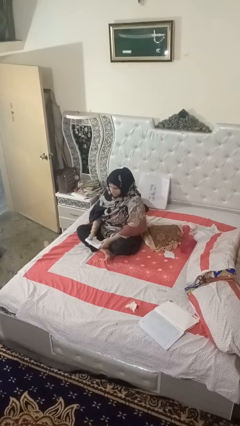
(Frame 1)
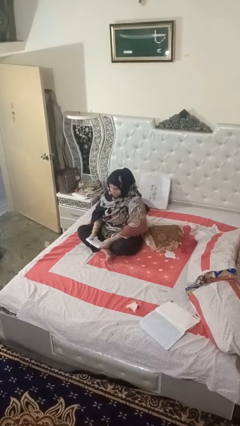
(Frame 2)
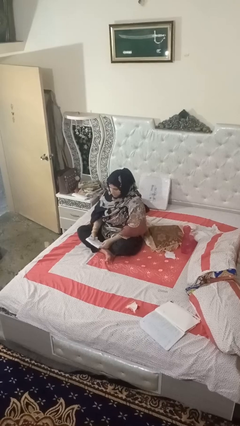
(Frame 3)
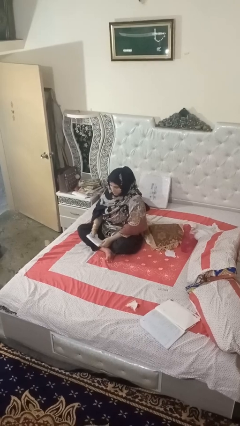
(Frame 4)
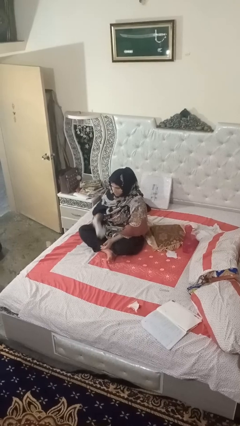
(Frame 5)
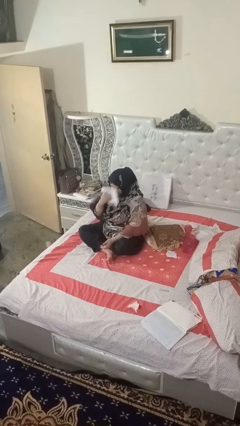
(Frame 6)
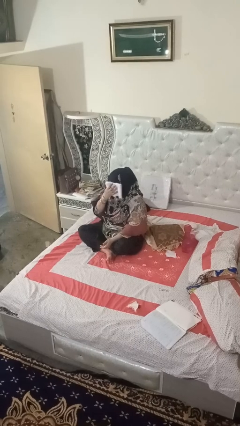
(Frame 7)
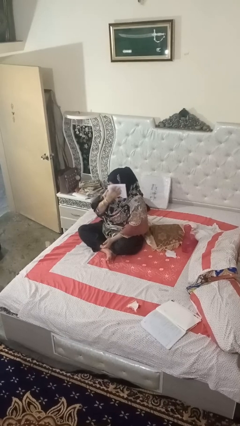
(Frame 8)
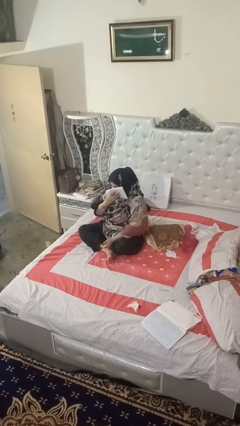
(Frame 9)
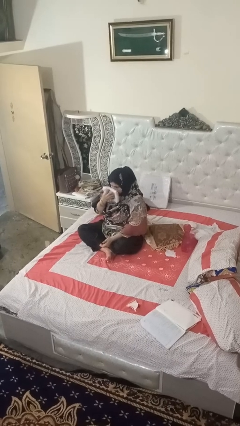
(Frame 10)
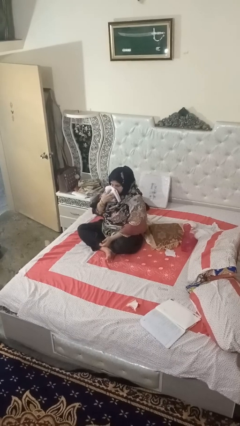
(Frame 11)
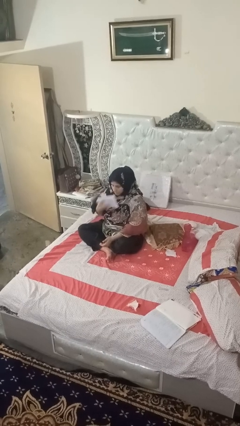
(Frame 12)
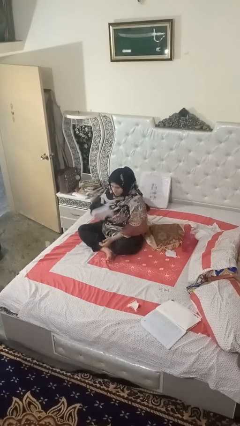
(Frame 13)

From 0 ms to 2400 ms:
person wipes mouth with napkin

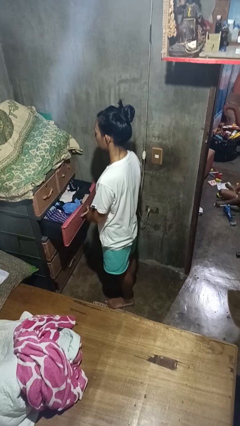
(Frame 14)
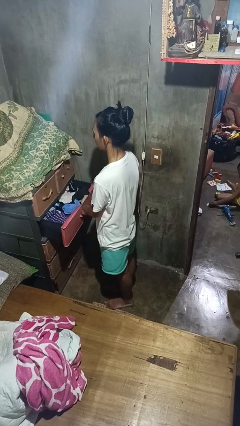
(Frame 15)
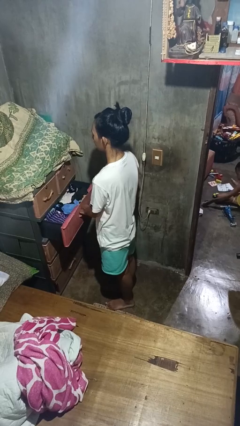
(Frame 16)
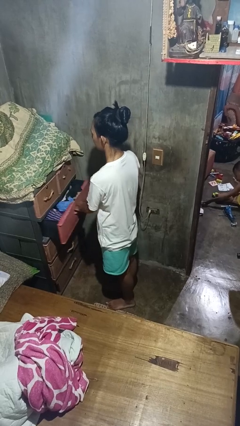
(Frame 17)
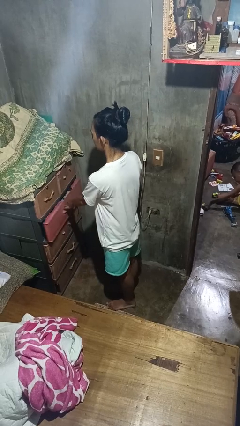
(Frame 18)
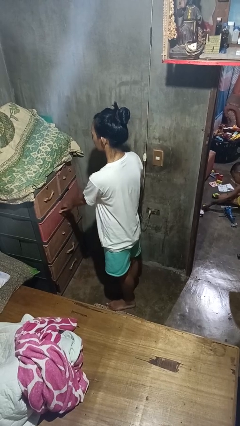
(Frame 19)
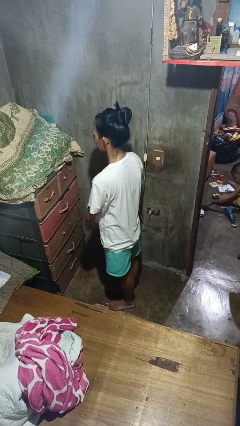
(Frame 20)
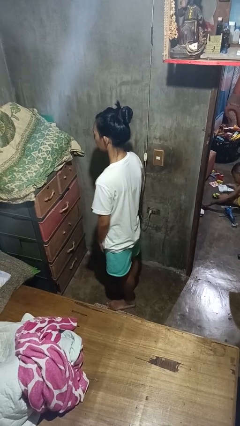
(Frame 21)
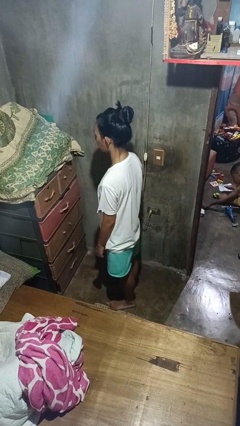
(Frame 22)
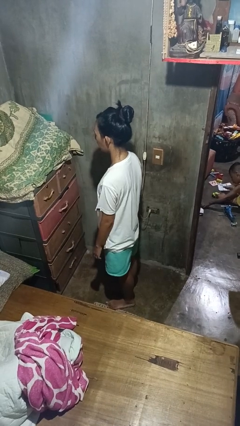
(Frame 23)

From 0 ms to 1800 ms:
person closes dresser drawer

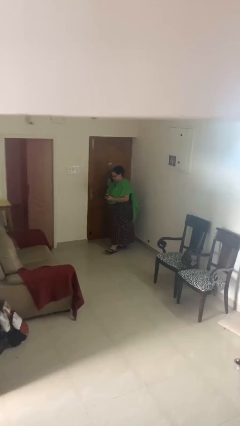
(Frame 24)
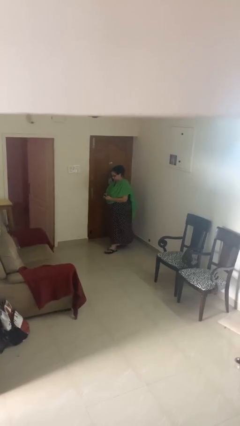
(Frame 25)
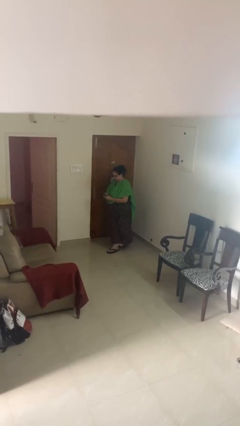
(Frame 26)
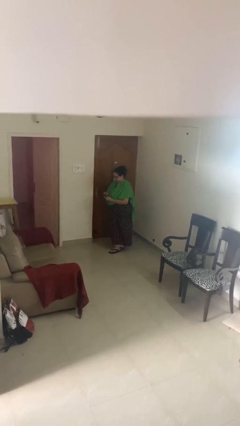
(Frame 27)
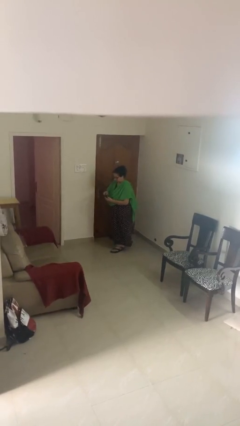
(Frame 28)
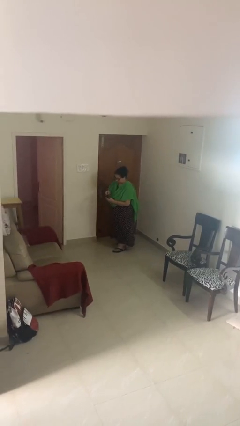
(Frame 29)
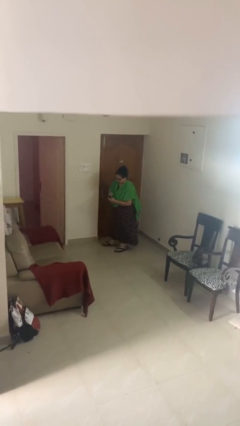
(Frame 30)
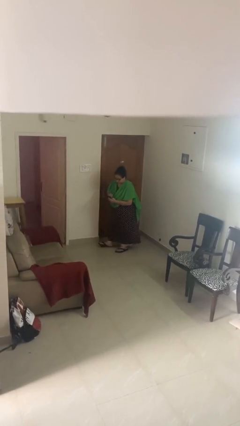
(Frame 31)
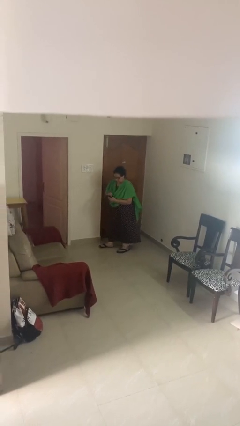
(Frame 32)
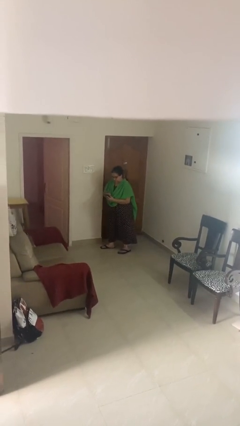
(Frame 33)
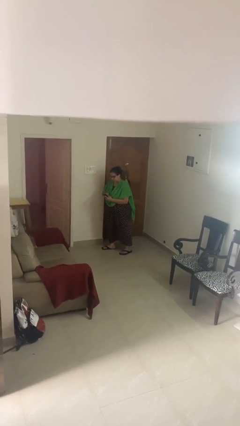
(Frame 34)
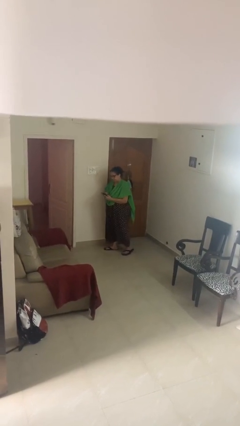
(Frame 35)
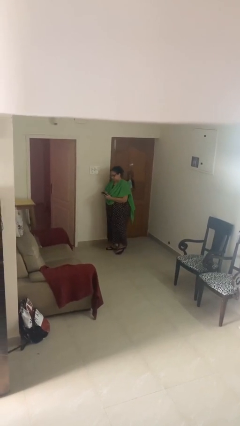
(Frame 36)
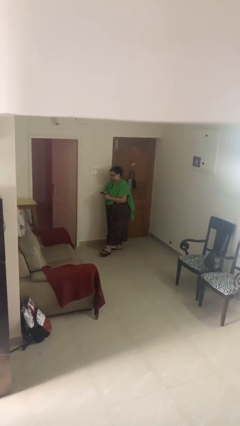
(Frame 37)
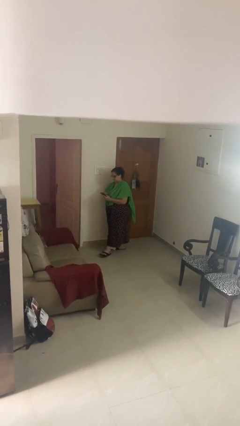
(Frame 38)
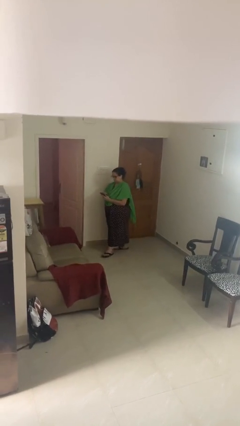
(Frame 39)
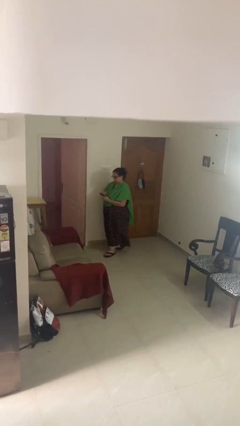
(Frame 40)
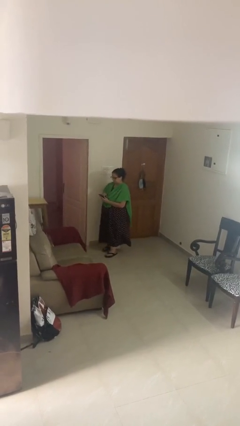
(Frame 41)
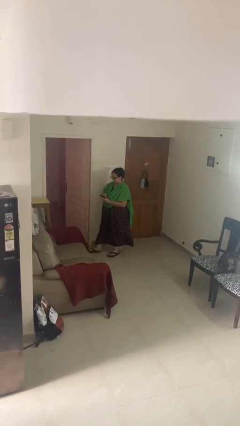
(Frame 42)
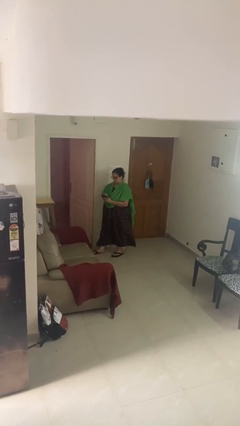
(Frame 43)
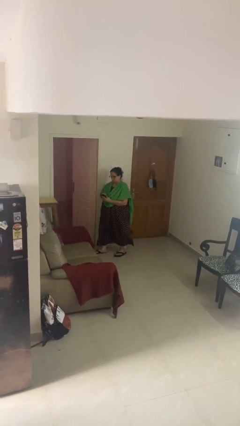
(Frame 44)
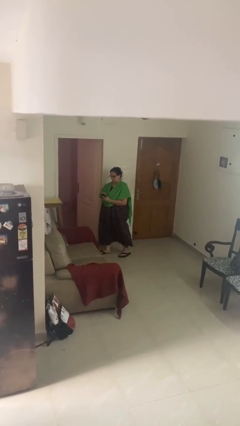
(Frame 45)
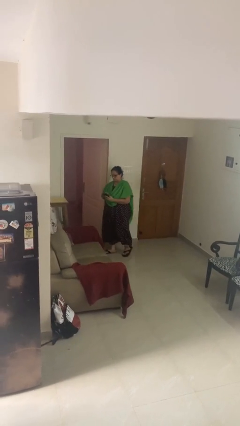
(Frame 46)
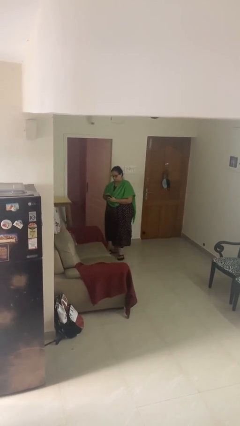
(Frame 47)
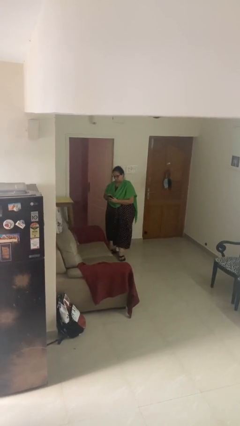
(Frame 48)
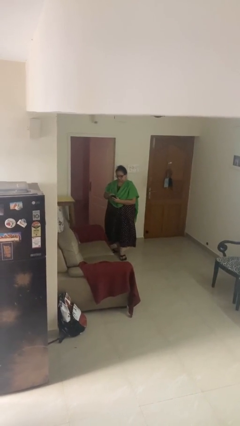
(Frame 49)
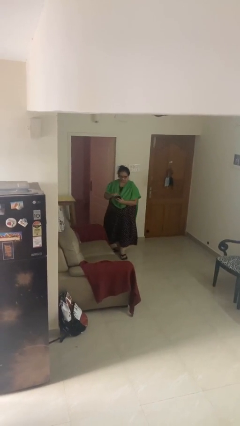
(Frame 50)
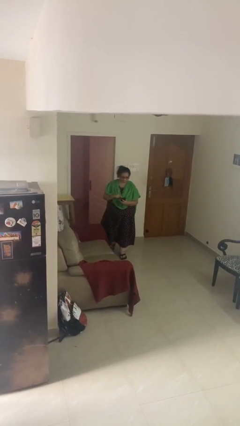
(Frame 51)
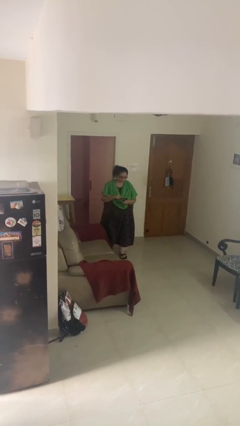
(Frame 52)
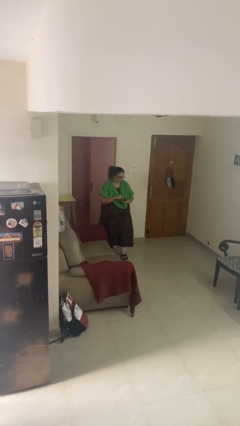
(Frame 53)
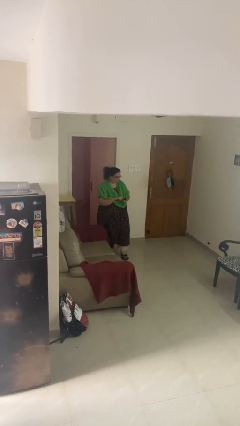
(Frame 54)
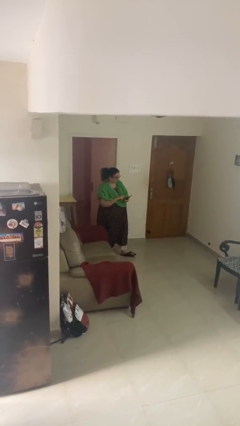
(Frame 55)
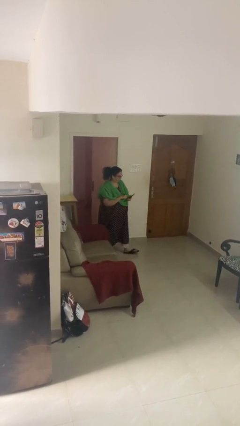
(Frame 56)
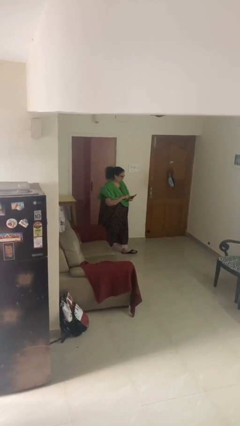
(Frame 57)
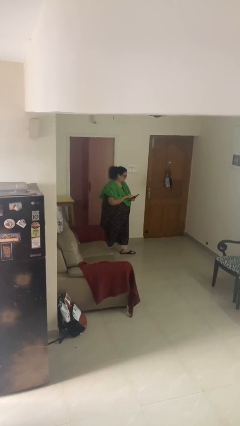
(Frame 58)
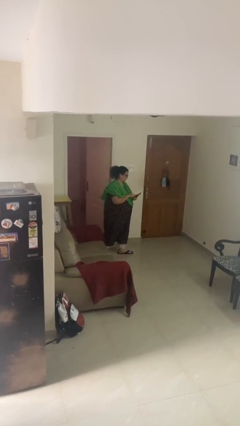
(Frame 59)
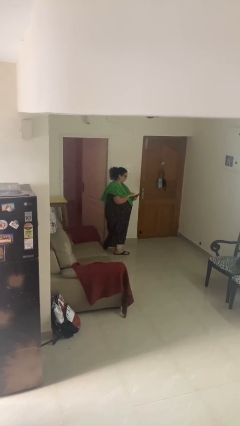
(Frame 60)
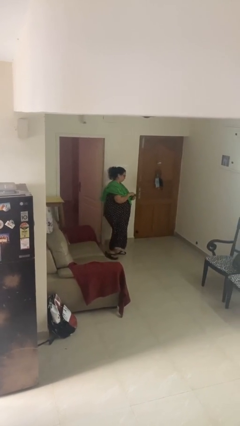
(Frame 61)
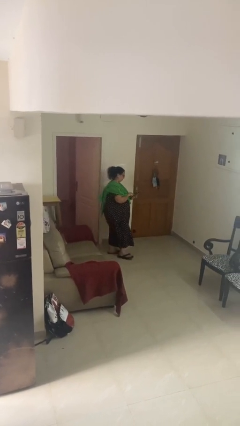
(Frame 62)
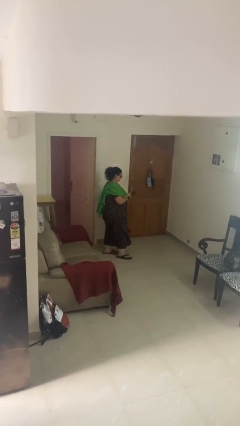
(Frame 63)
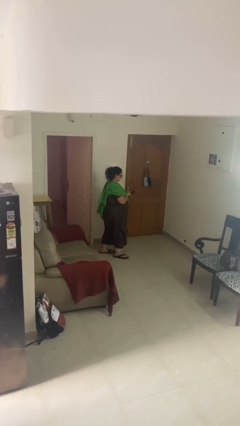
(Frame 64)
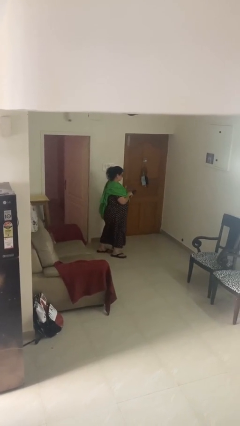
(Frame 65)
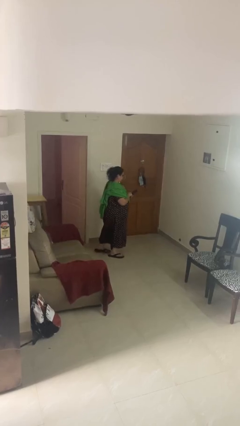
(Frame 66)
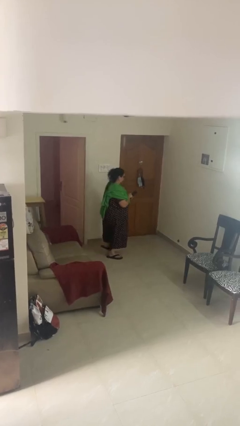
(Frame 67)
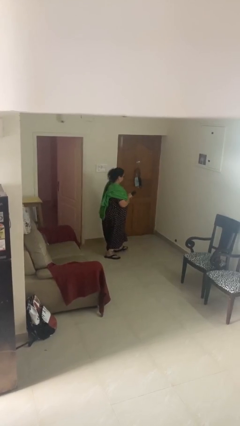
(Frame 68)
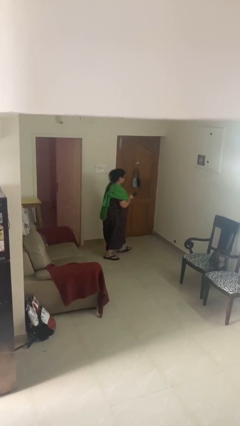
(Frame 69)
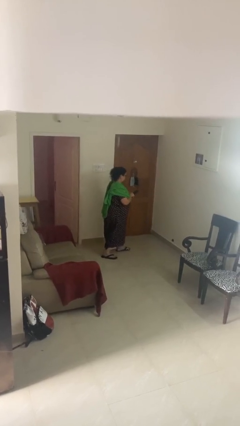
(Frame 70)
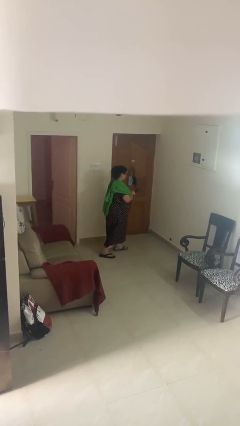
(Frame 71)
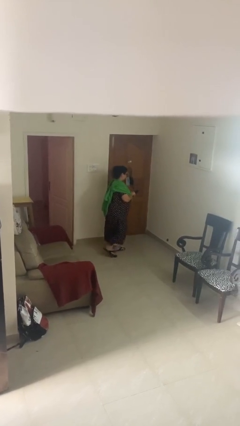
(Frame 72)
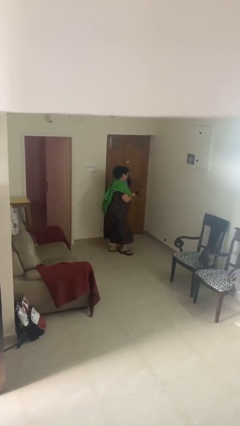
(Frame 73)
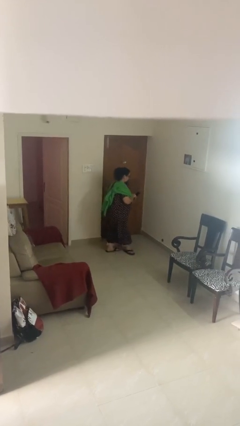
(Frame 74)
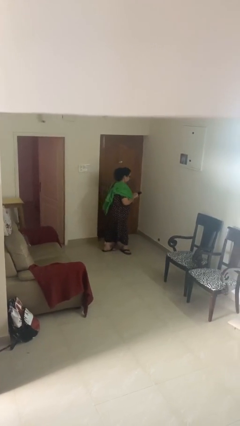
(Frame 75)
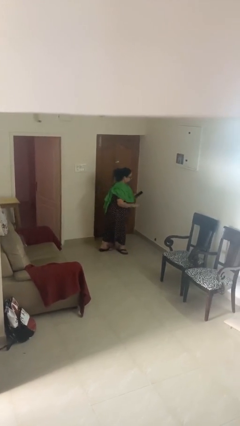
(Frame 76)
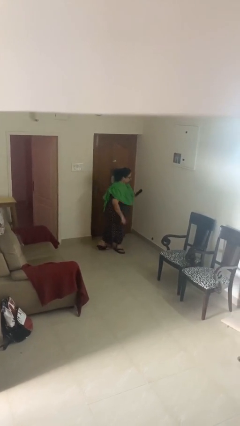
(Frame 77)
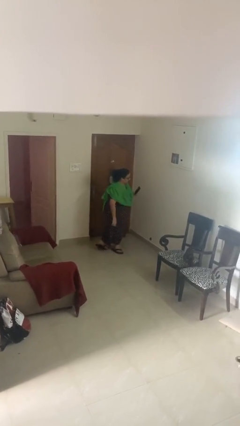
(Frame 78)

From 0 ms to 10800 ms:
person texts on phone

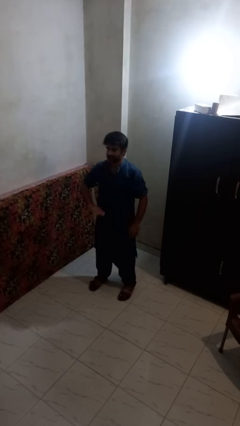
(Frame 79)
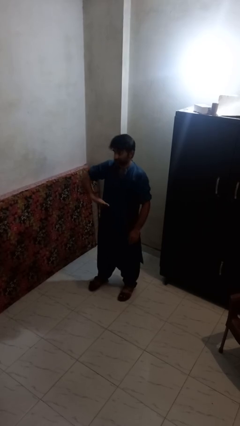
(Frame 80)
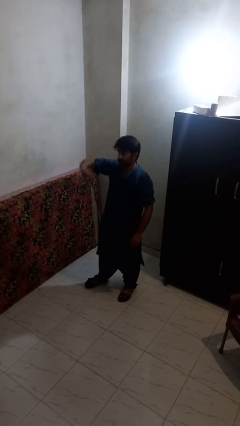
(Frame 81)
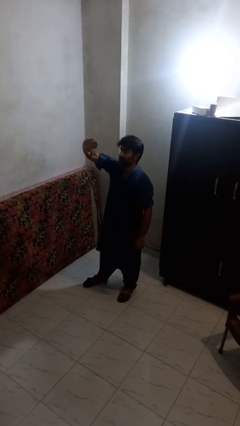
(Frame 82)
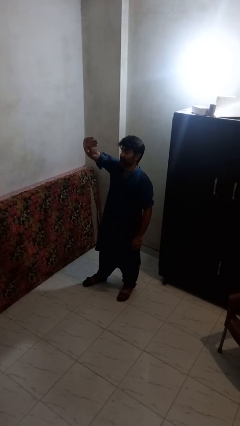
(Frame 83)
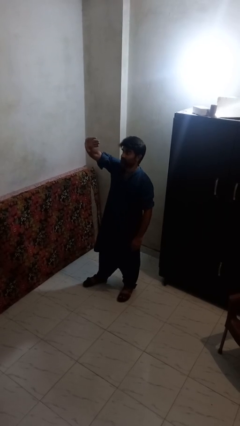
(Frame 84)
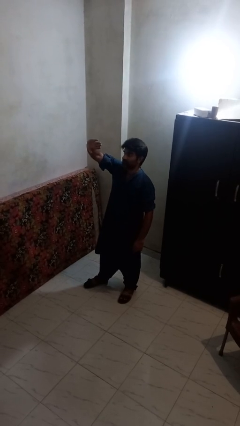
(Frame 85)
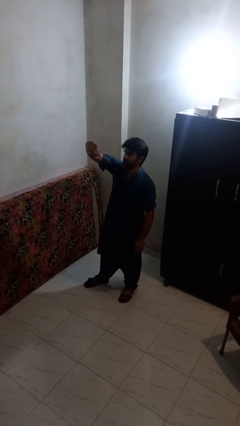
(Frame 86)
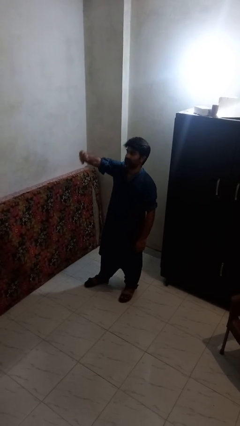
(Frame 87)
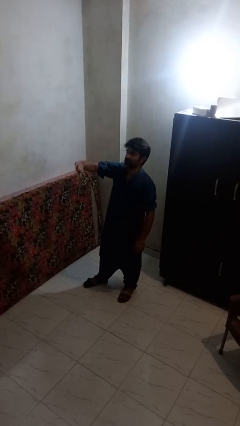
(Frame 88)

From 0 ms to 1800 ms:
person gestures swipe up

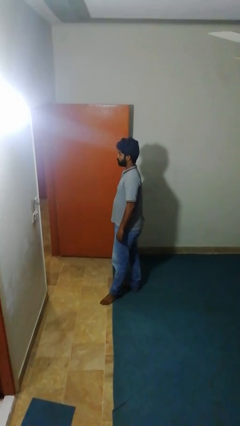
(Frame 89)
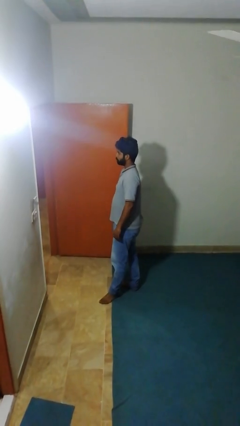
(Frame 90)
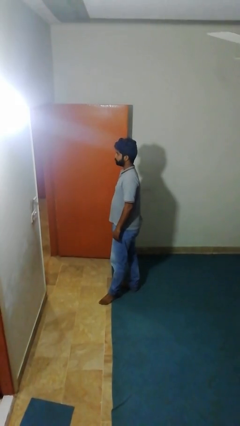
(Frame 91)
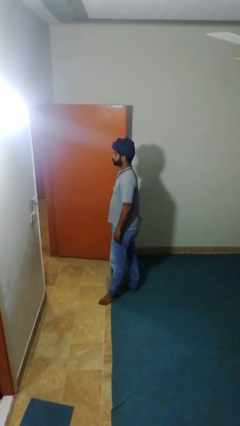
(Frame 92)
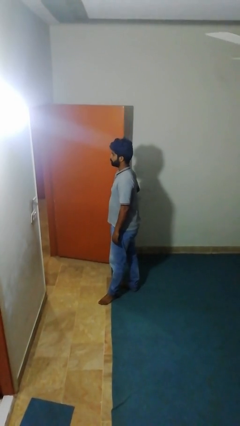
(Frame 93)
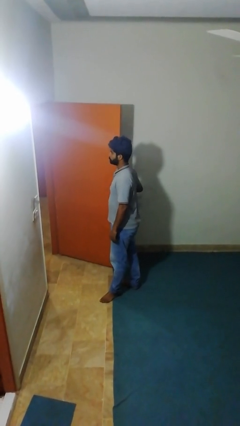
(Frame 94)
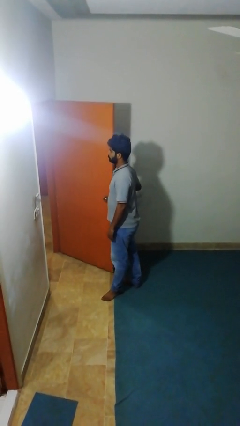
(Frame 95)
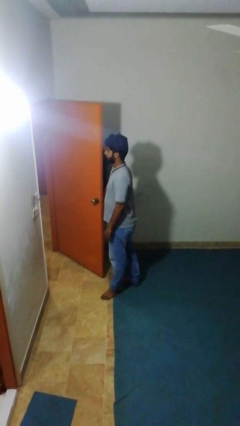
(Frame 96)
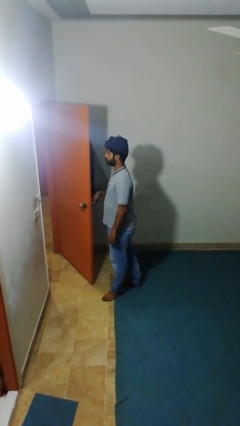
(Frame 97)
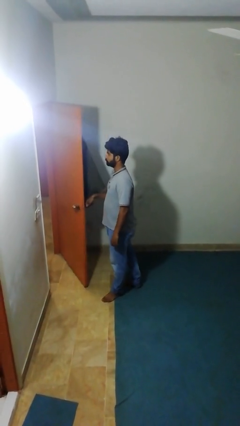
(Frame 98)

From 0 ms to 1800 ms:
person closes facility door
